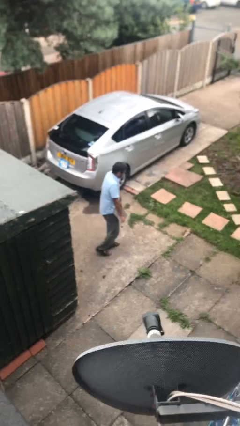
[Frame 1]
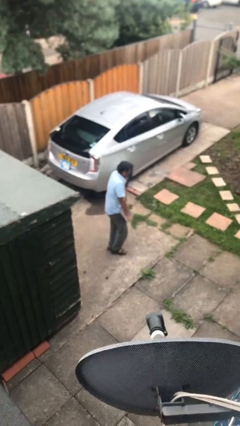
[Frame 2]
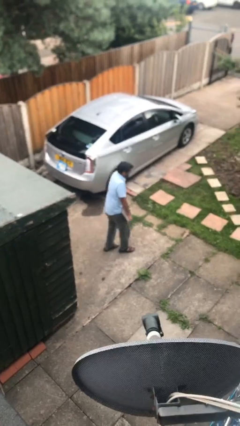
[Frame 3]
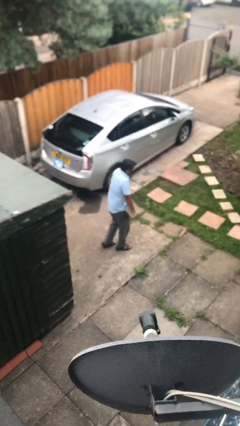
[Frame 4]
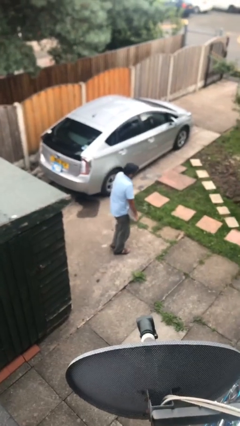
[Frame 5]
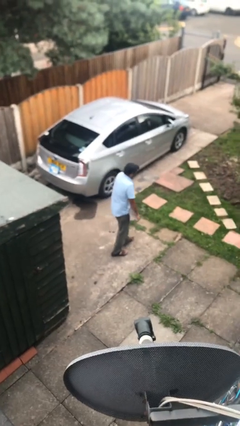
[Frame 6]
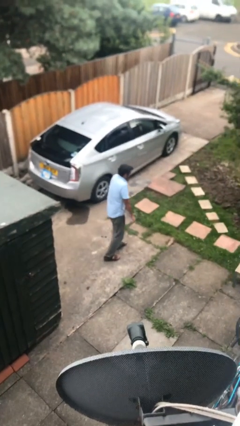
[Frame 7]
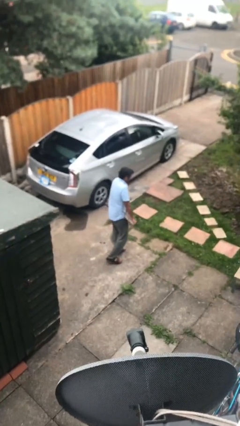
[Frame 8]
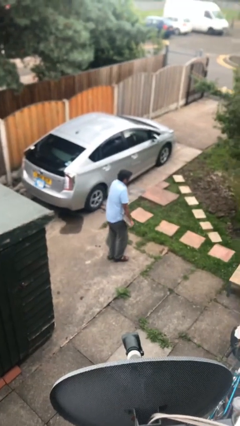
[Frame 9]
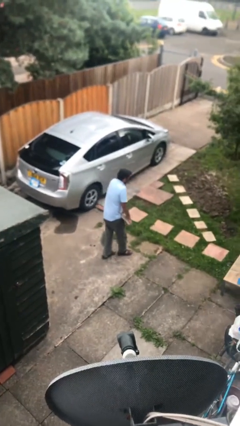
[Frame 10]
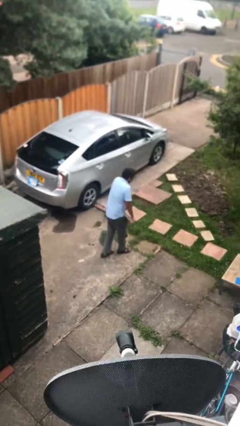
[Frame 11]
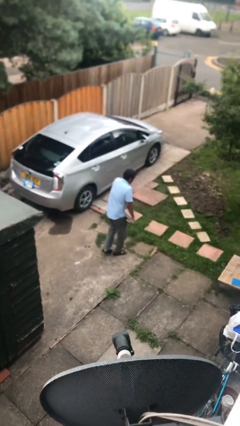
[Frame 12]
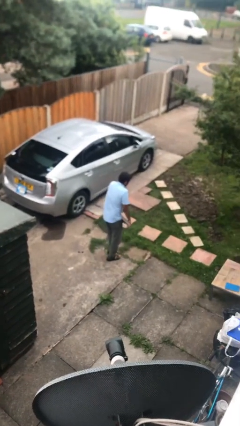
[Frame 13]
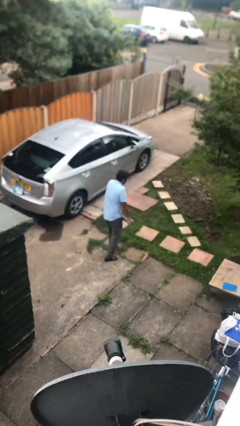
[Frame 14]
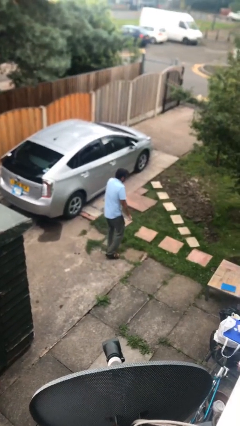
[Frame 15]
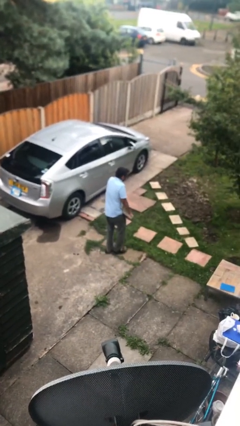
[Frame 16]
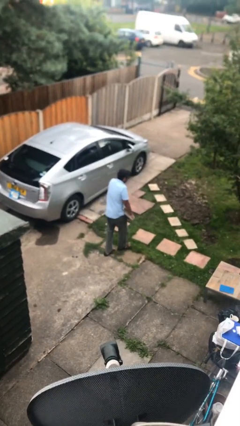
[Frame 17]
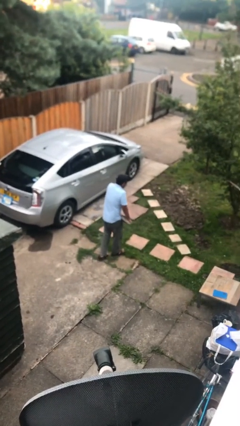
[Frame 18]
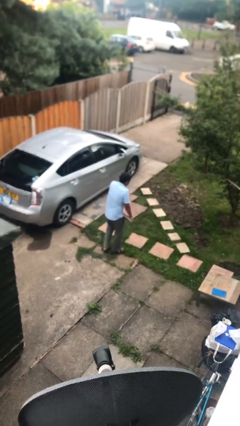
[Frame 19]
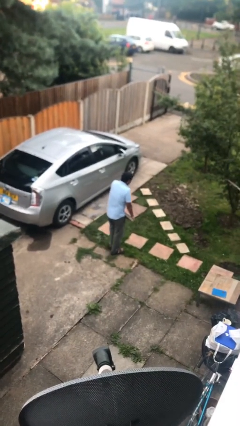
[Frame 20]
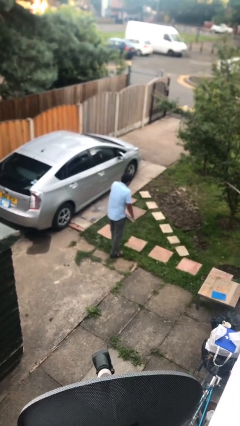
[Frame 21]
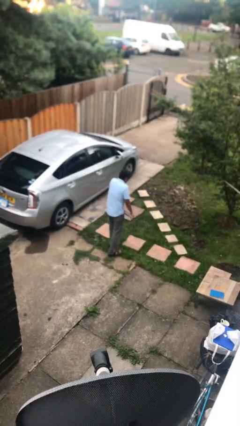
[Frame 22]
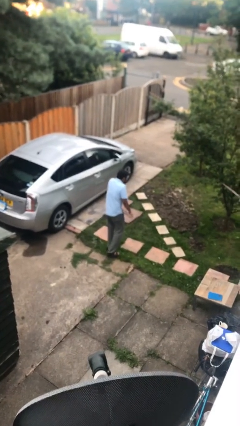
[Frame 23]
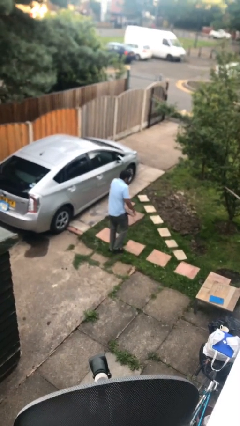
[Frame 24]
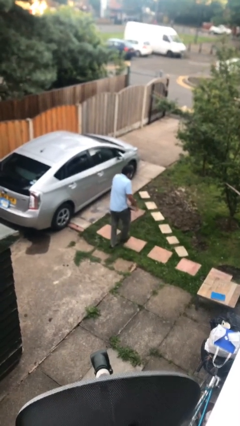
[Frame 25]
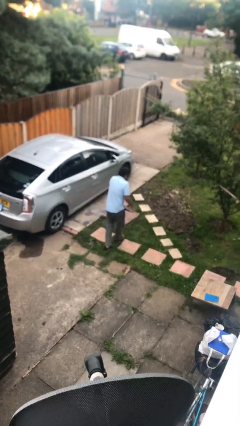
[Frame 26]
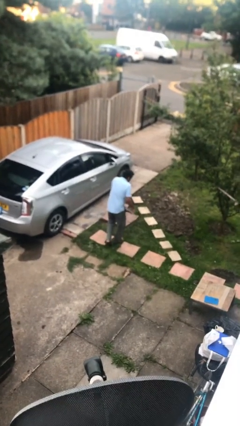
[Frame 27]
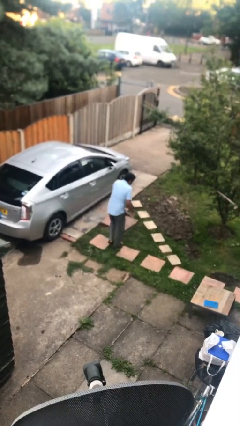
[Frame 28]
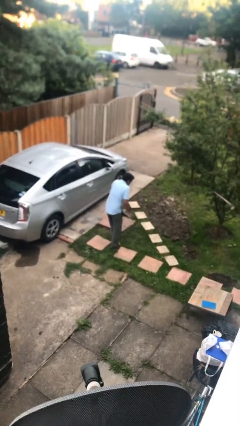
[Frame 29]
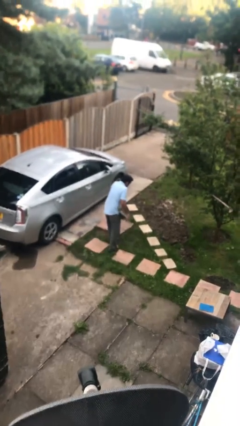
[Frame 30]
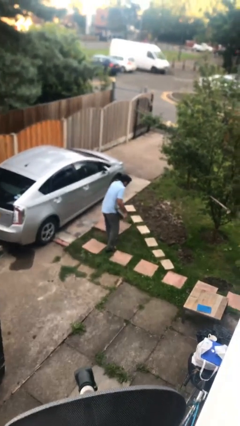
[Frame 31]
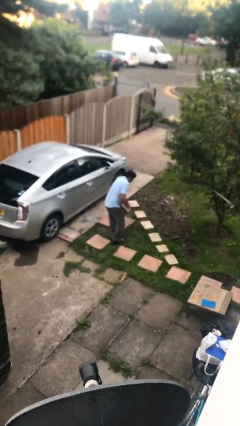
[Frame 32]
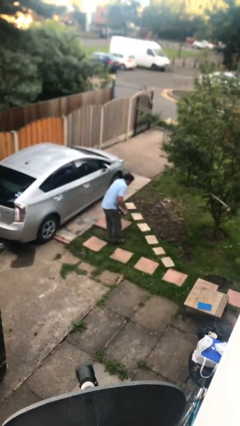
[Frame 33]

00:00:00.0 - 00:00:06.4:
person carries heavy object

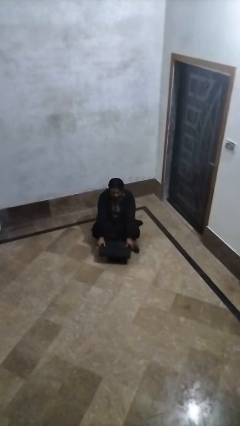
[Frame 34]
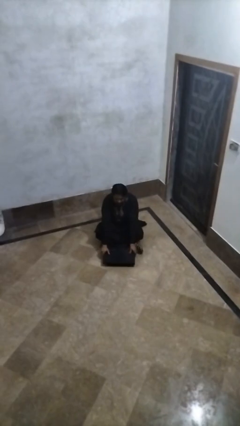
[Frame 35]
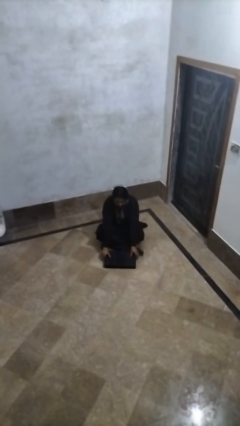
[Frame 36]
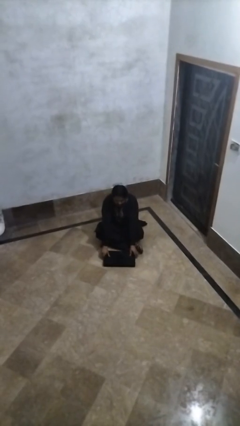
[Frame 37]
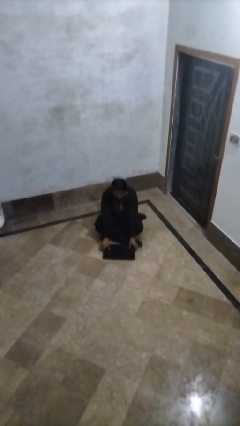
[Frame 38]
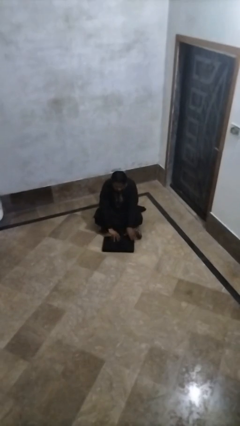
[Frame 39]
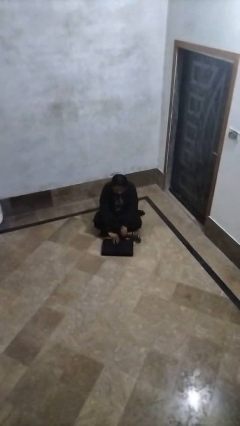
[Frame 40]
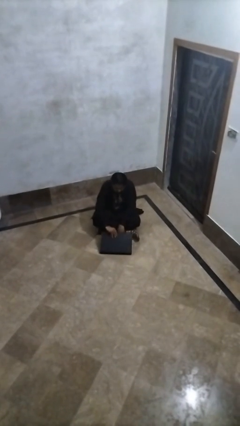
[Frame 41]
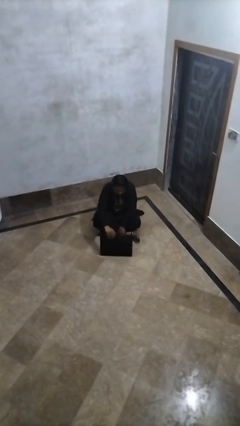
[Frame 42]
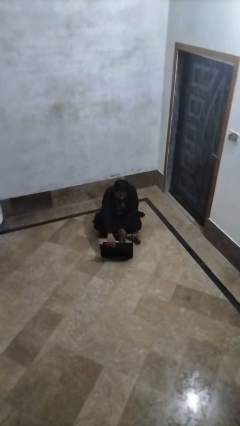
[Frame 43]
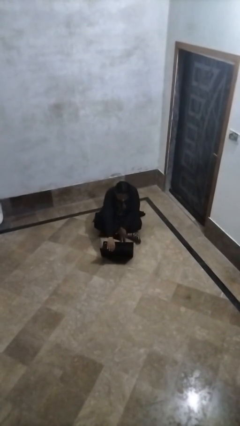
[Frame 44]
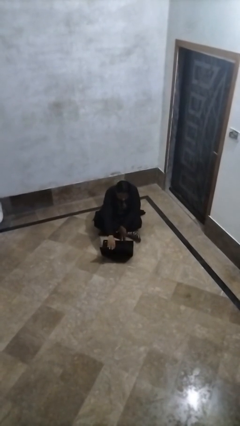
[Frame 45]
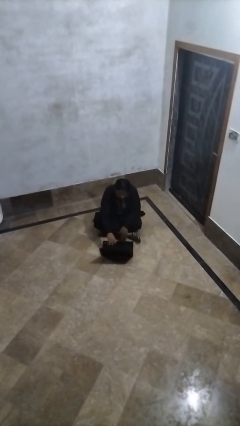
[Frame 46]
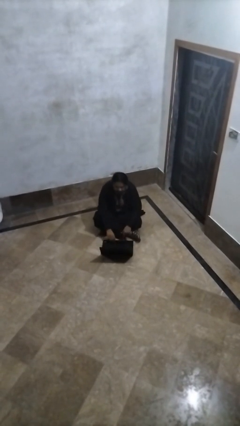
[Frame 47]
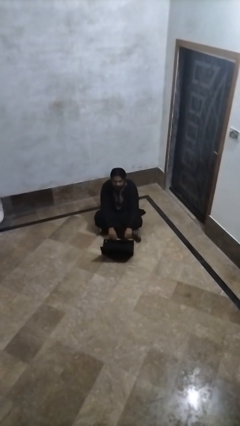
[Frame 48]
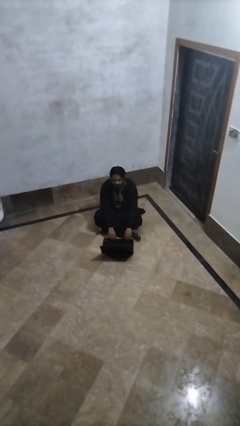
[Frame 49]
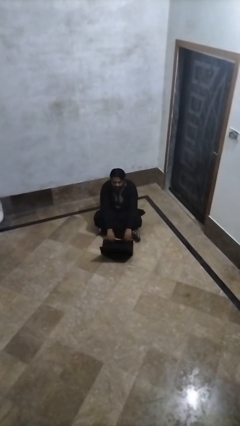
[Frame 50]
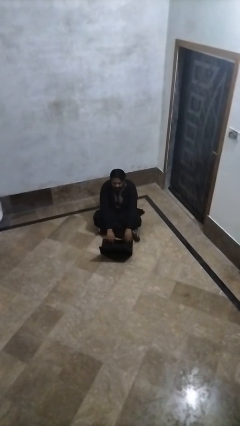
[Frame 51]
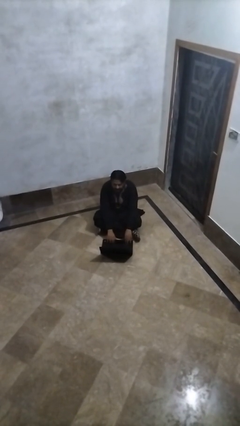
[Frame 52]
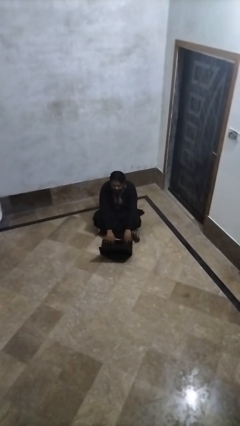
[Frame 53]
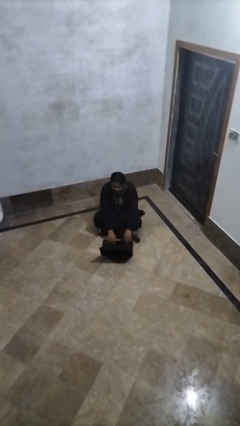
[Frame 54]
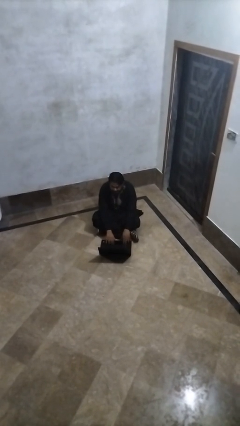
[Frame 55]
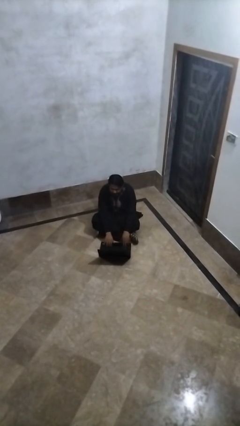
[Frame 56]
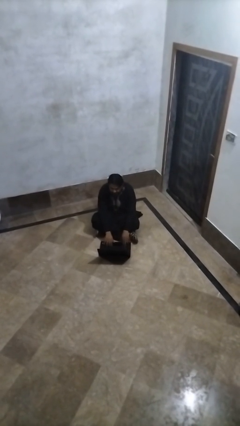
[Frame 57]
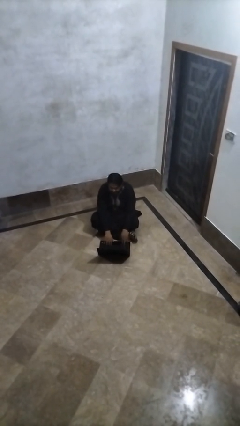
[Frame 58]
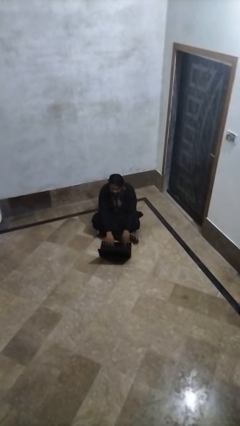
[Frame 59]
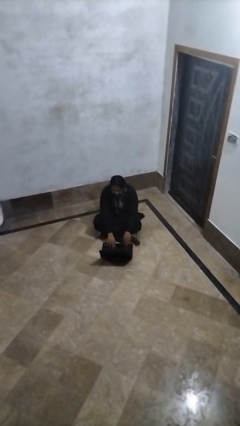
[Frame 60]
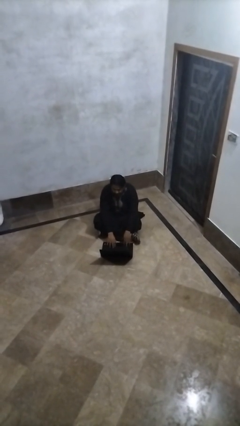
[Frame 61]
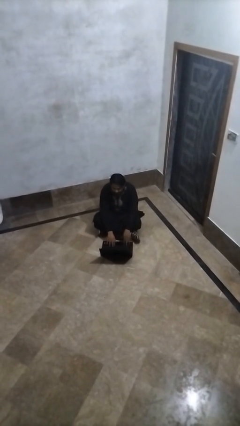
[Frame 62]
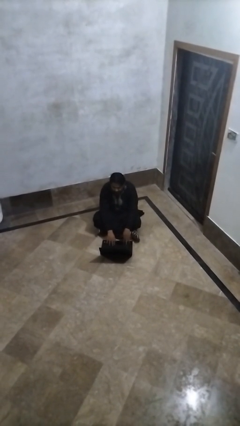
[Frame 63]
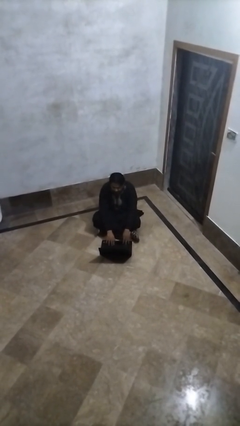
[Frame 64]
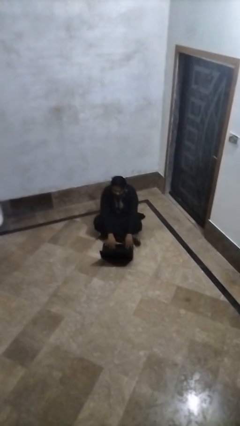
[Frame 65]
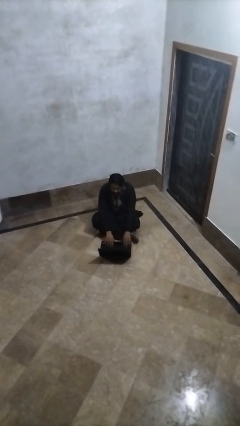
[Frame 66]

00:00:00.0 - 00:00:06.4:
person opens laptop

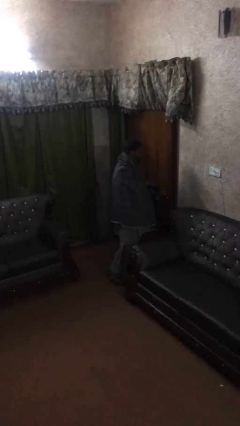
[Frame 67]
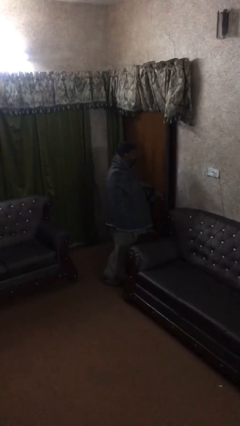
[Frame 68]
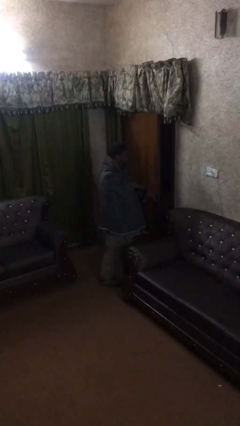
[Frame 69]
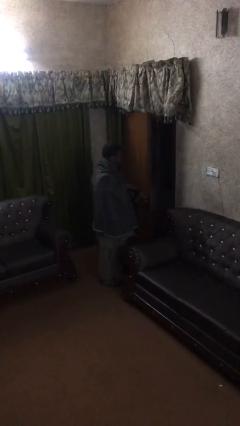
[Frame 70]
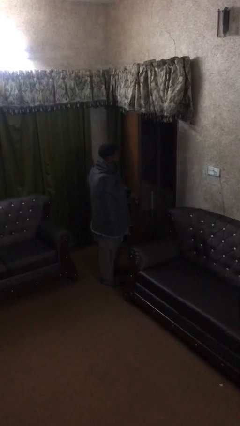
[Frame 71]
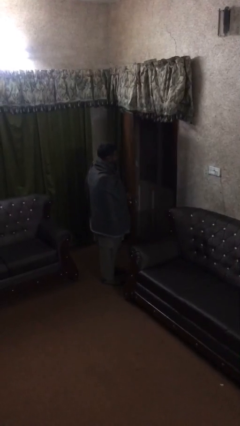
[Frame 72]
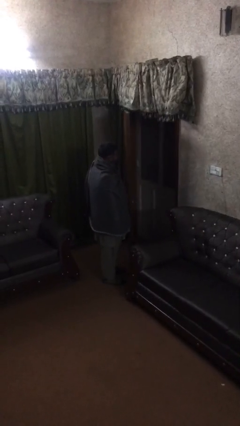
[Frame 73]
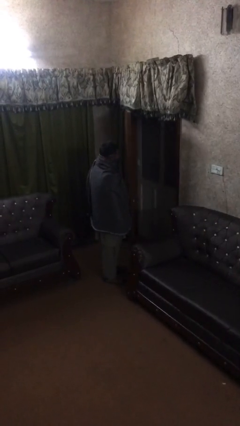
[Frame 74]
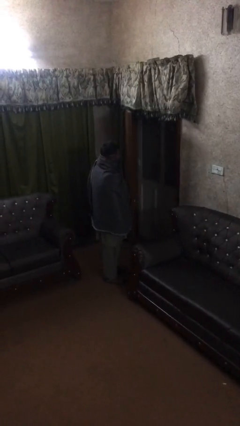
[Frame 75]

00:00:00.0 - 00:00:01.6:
person opens facility door

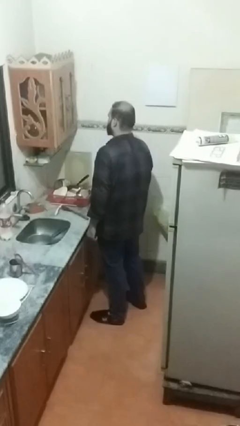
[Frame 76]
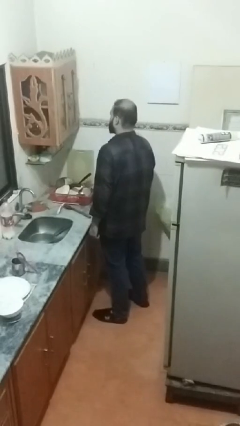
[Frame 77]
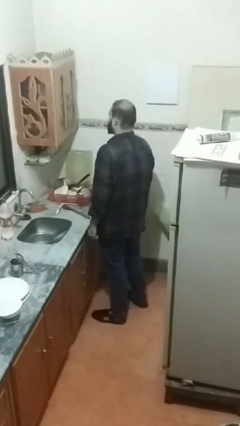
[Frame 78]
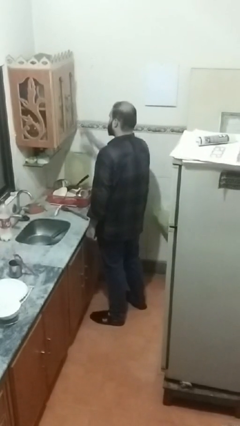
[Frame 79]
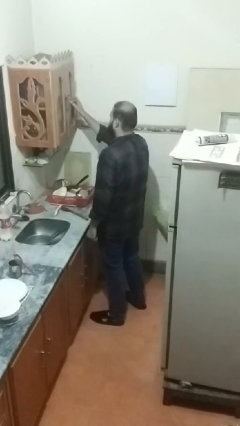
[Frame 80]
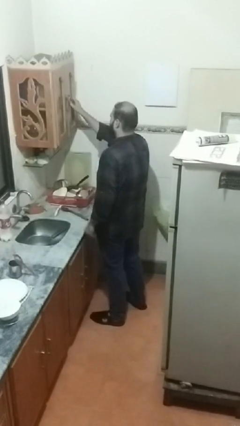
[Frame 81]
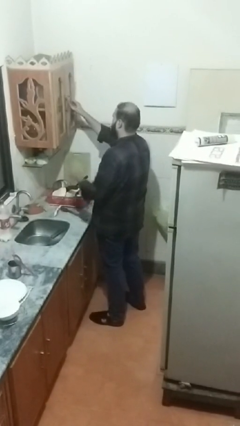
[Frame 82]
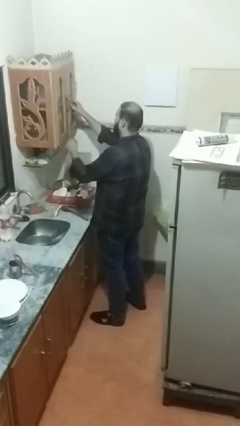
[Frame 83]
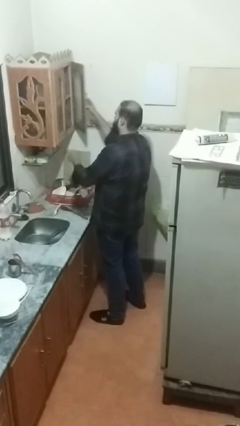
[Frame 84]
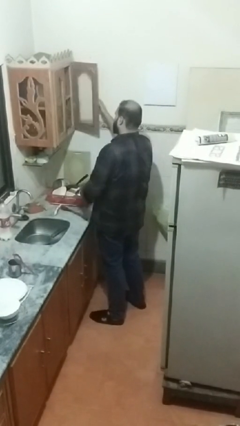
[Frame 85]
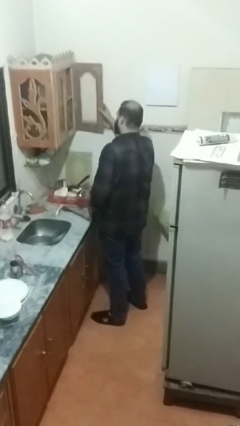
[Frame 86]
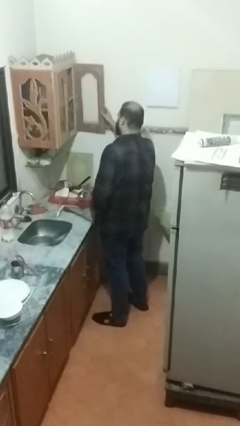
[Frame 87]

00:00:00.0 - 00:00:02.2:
person opens kitchen drawer

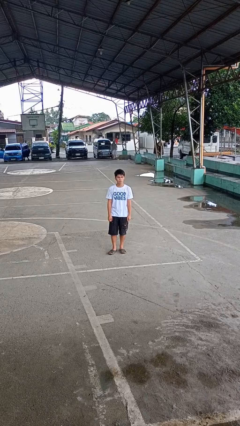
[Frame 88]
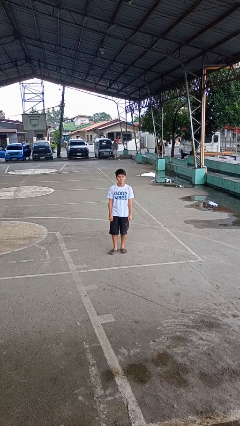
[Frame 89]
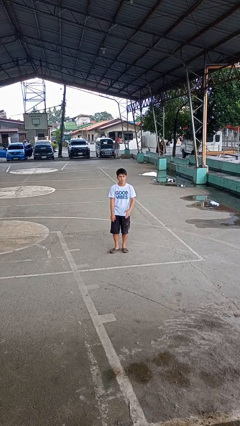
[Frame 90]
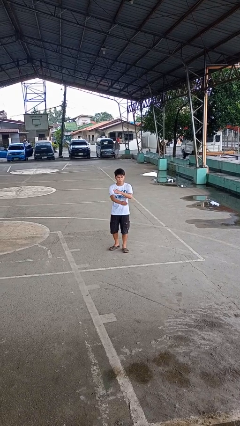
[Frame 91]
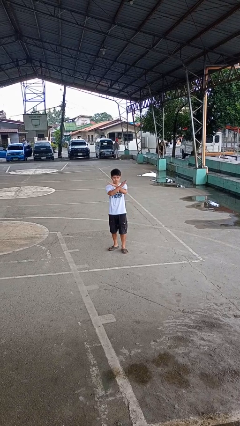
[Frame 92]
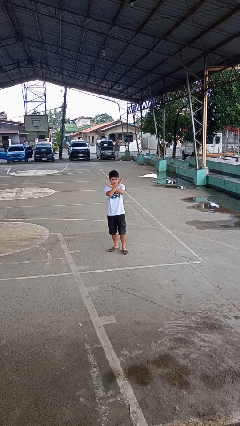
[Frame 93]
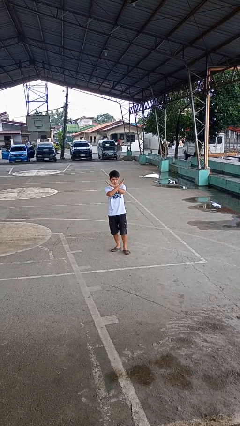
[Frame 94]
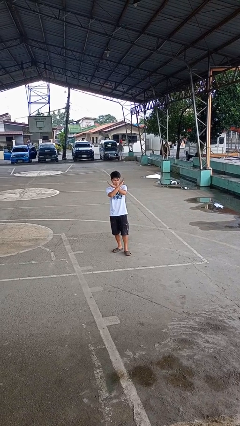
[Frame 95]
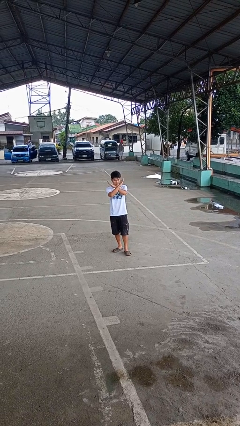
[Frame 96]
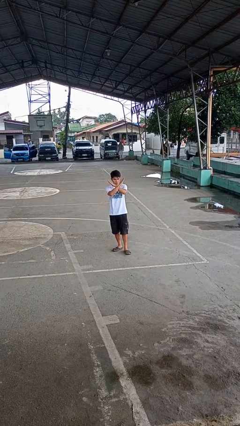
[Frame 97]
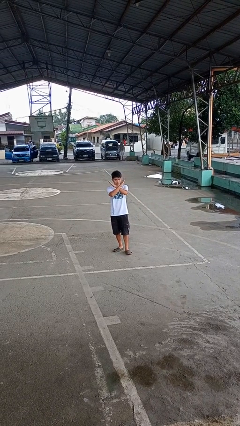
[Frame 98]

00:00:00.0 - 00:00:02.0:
person gestures arms x
